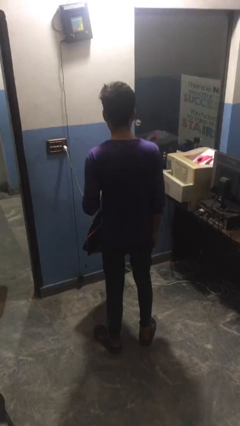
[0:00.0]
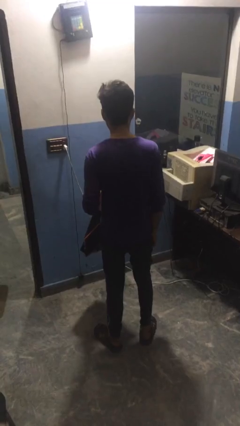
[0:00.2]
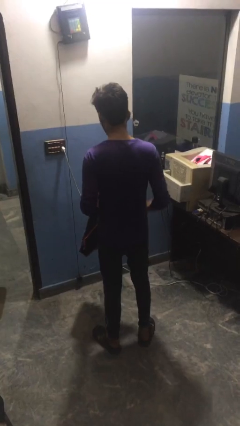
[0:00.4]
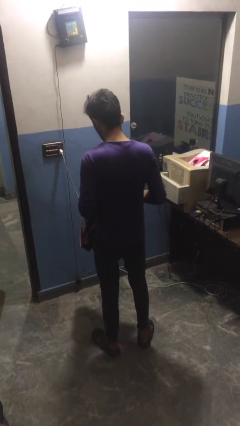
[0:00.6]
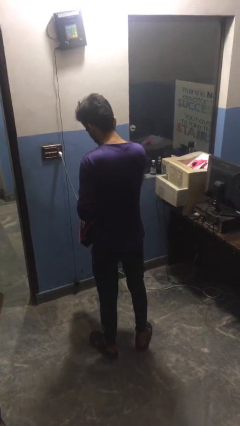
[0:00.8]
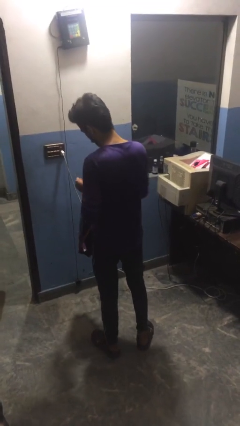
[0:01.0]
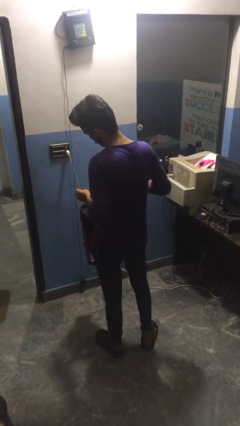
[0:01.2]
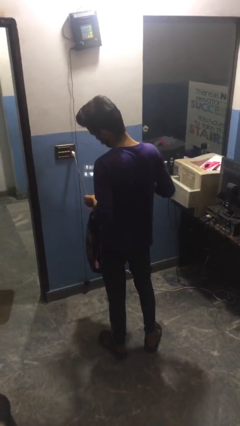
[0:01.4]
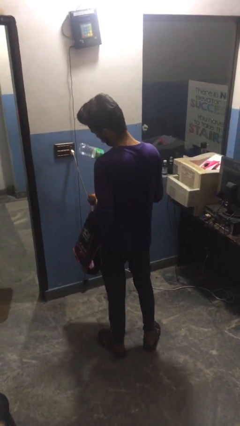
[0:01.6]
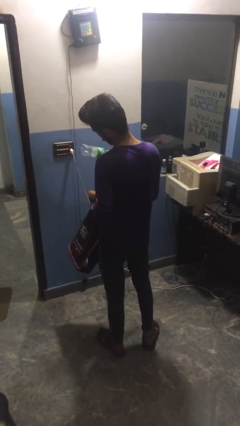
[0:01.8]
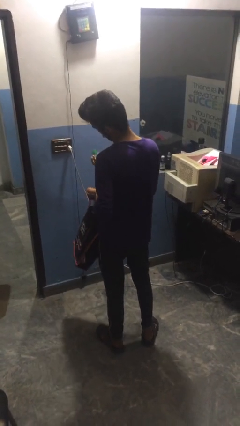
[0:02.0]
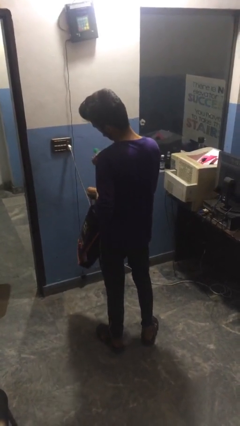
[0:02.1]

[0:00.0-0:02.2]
person takes object from bag

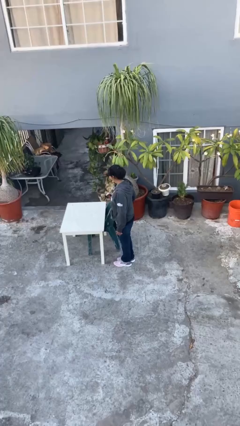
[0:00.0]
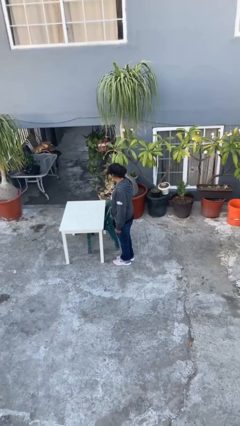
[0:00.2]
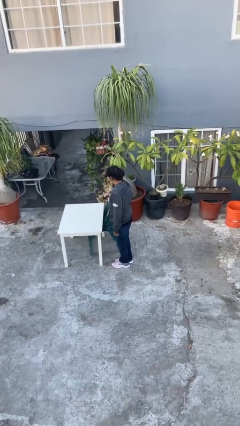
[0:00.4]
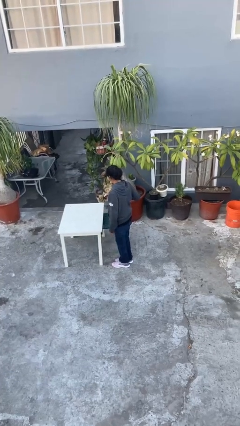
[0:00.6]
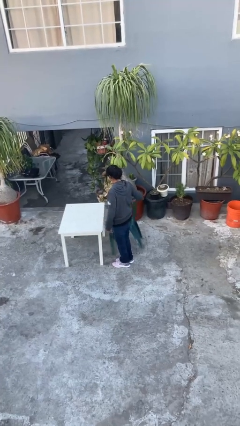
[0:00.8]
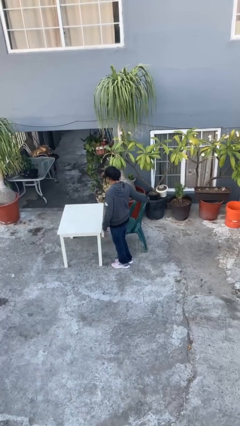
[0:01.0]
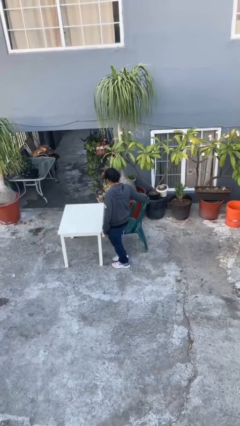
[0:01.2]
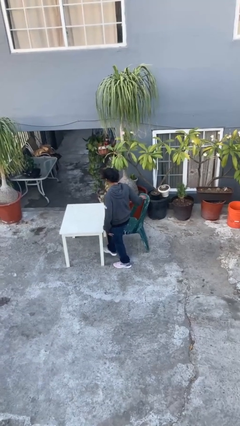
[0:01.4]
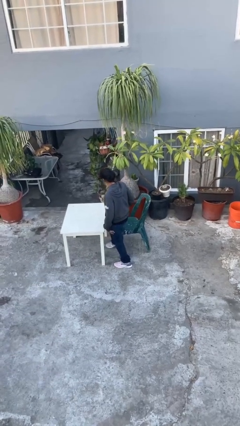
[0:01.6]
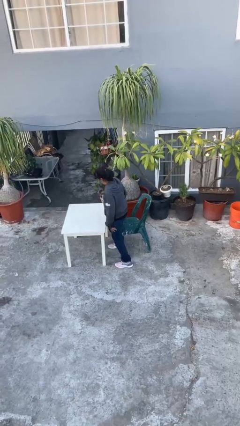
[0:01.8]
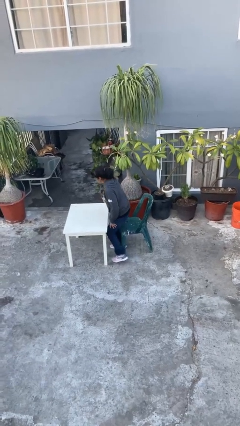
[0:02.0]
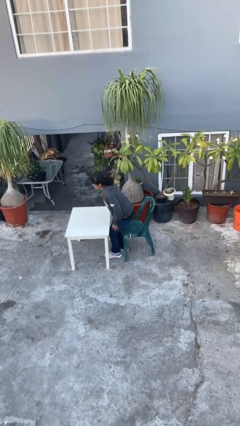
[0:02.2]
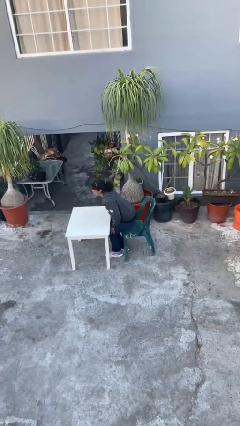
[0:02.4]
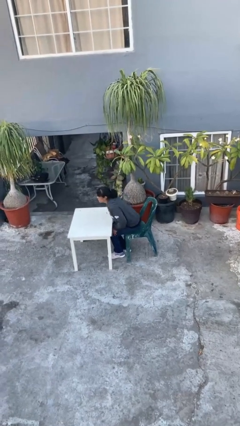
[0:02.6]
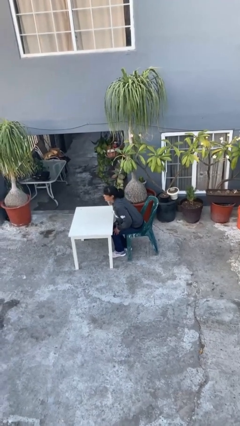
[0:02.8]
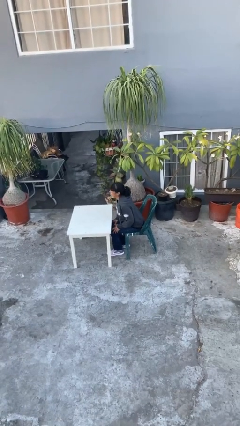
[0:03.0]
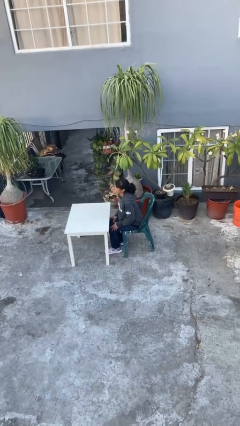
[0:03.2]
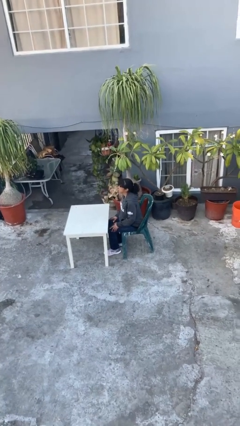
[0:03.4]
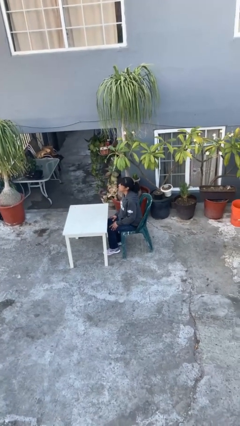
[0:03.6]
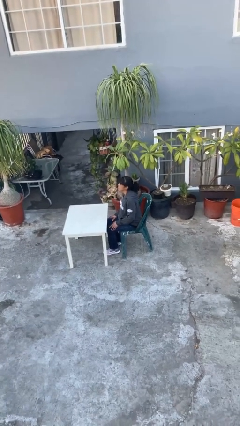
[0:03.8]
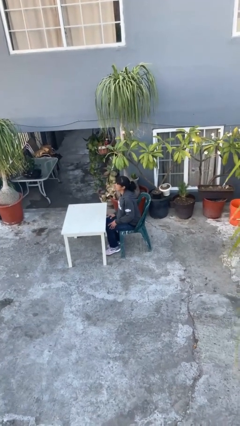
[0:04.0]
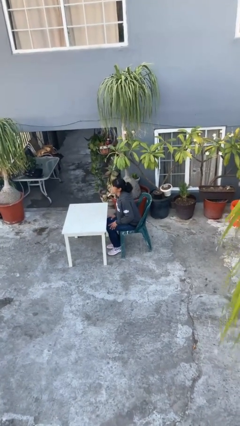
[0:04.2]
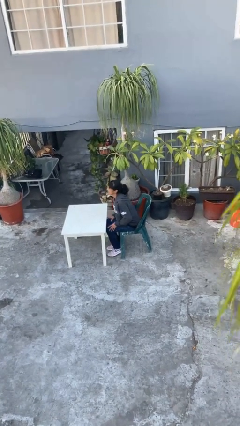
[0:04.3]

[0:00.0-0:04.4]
person sits down

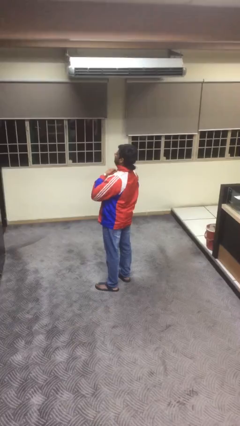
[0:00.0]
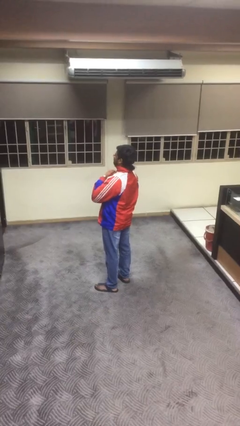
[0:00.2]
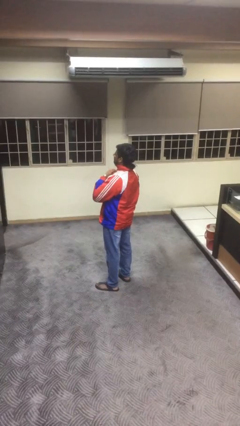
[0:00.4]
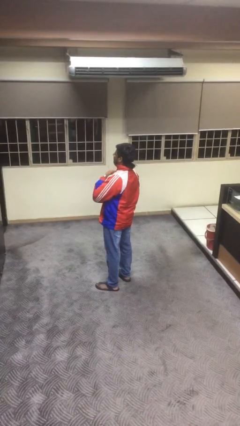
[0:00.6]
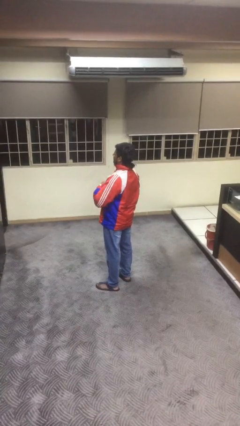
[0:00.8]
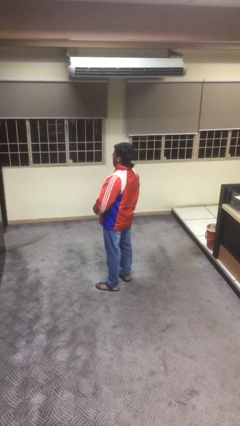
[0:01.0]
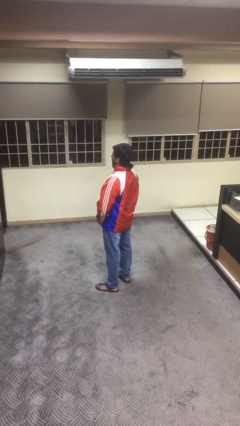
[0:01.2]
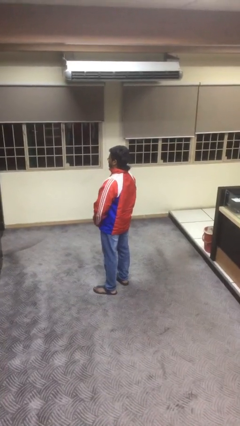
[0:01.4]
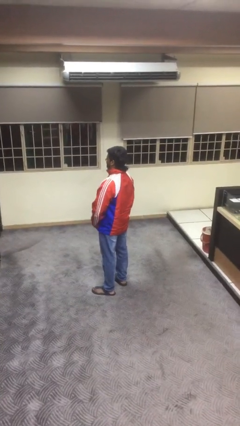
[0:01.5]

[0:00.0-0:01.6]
person unzips jacket

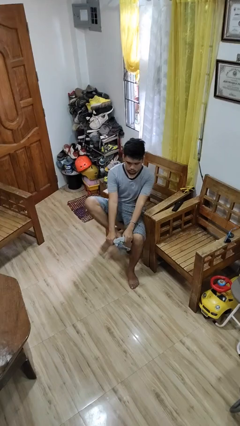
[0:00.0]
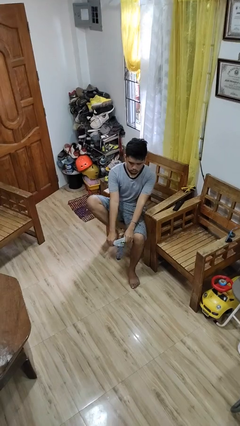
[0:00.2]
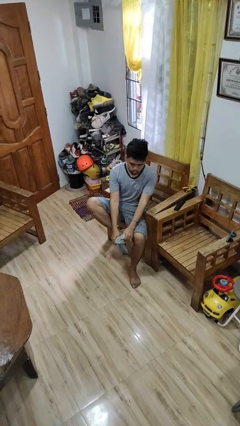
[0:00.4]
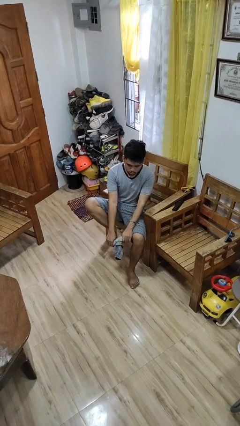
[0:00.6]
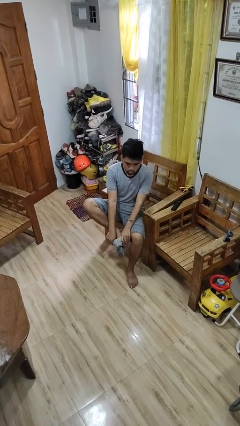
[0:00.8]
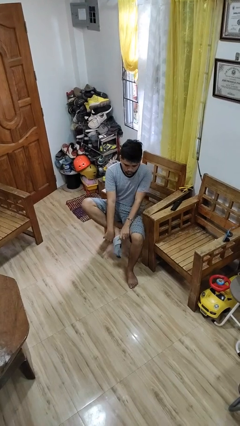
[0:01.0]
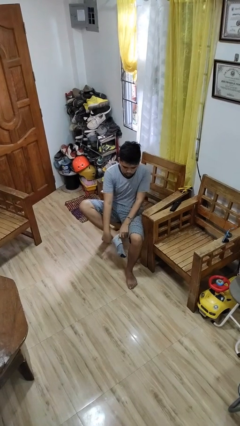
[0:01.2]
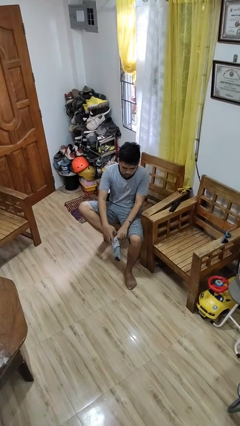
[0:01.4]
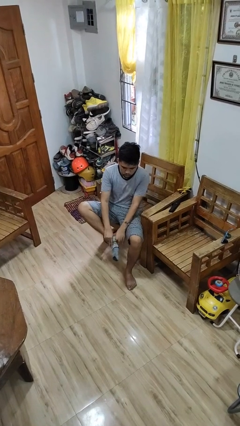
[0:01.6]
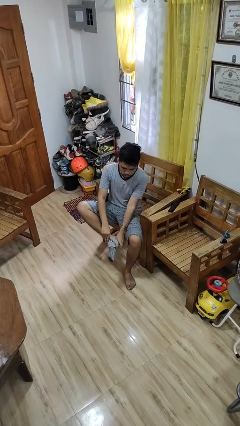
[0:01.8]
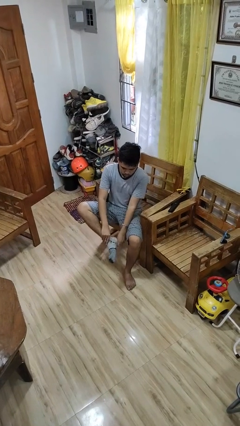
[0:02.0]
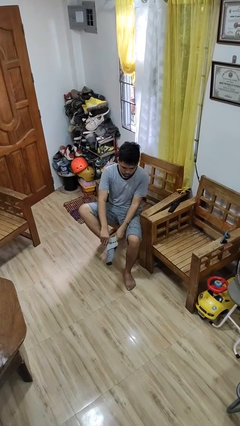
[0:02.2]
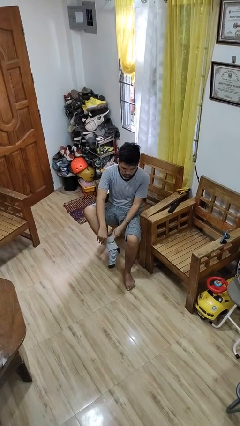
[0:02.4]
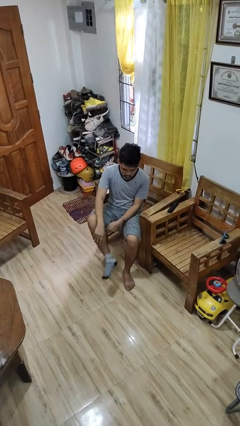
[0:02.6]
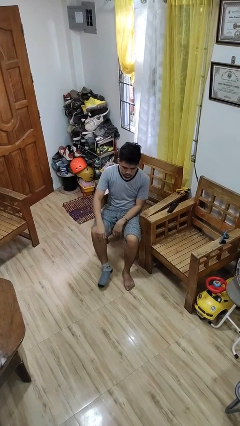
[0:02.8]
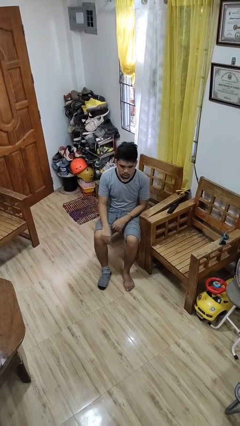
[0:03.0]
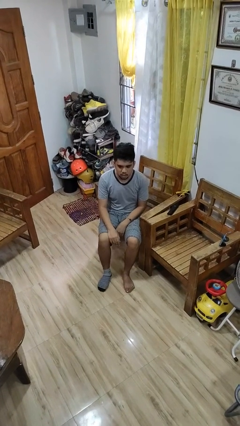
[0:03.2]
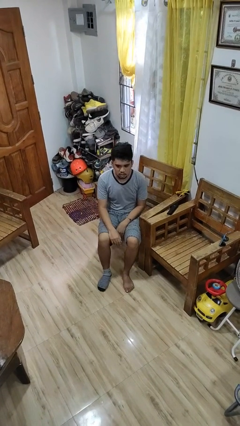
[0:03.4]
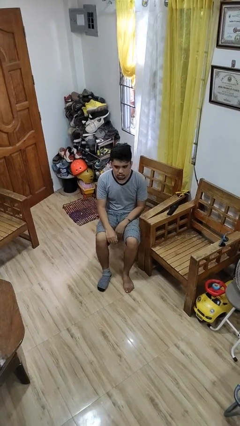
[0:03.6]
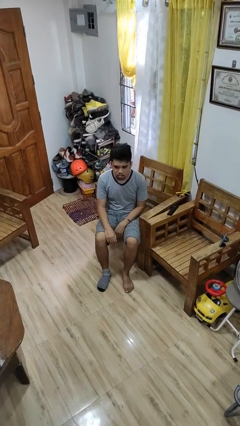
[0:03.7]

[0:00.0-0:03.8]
person puts on socks

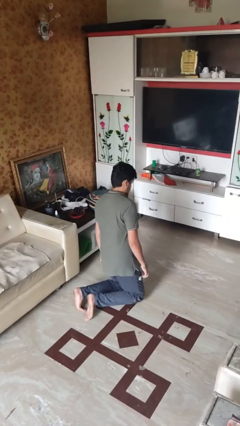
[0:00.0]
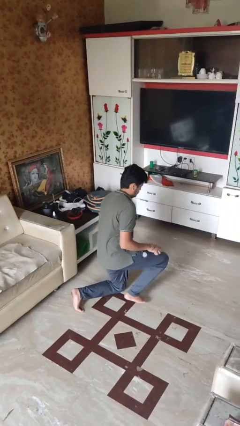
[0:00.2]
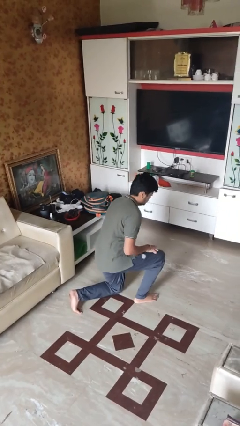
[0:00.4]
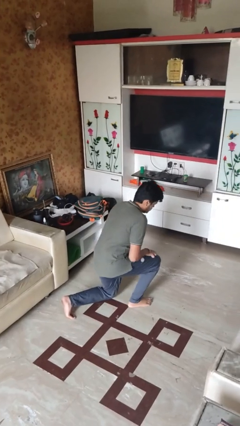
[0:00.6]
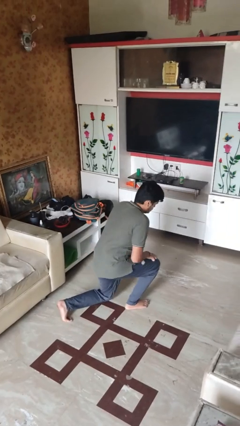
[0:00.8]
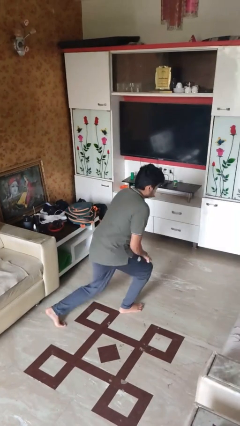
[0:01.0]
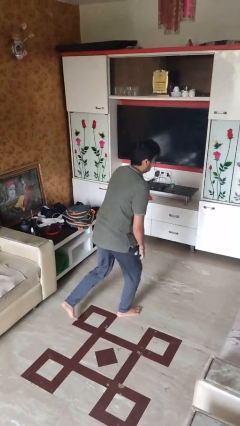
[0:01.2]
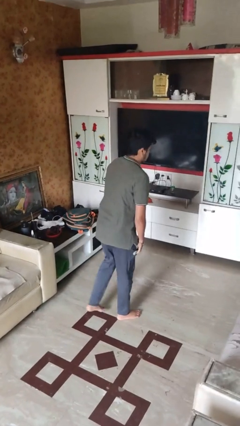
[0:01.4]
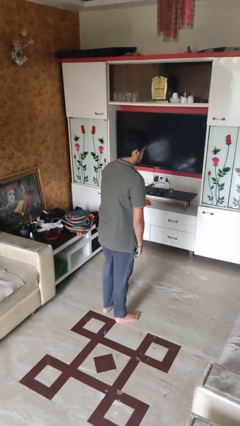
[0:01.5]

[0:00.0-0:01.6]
person stands up from floor

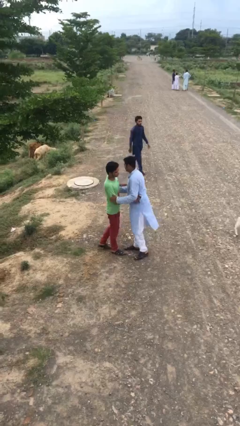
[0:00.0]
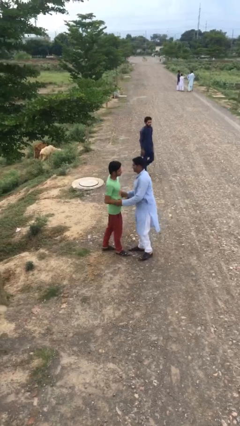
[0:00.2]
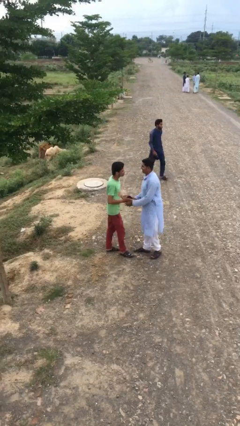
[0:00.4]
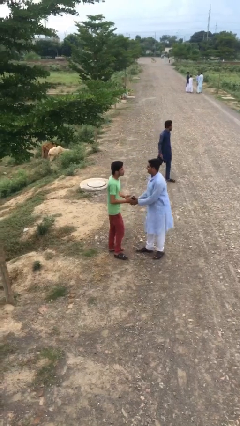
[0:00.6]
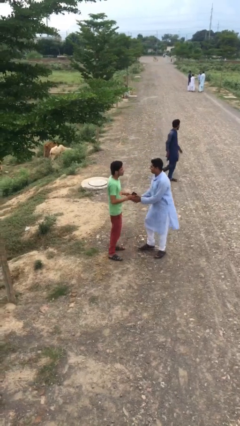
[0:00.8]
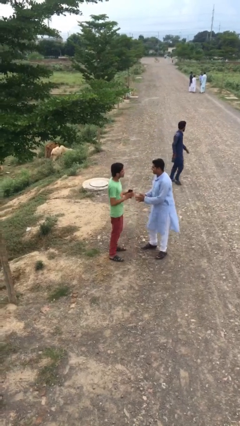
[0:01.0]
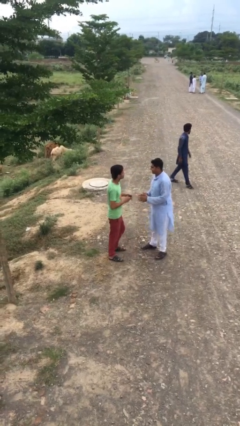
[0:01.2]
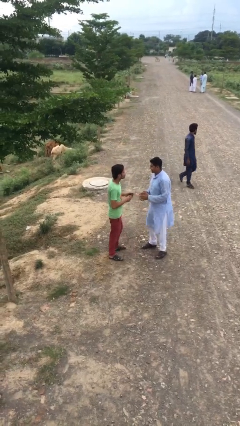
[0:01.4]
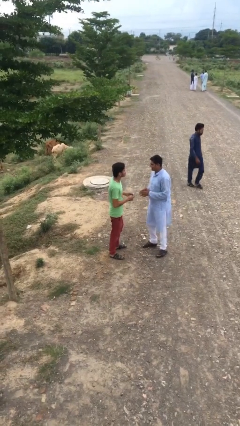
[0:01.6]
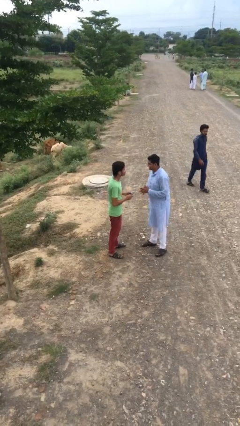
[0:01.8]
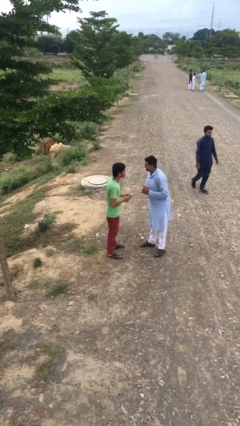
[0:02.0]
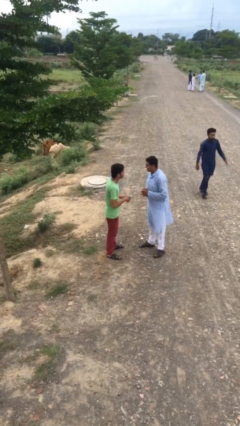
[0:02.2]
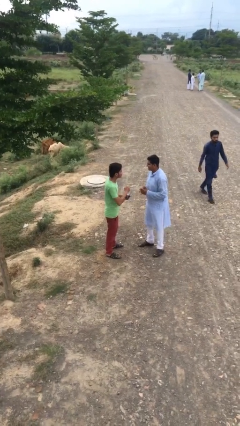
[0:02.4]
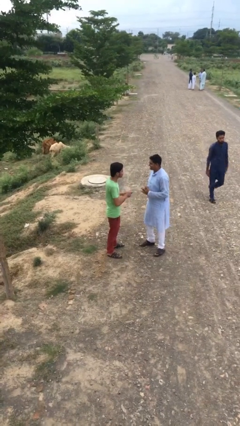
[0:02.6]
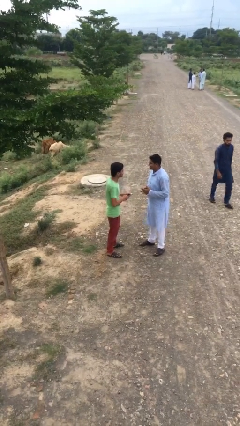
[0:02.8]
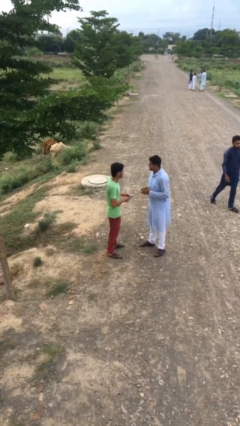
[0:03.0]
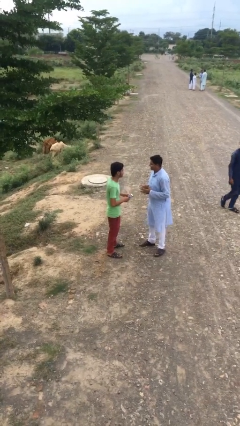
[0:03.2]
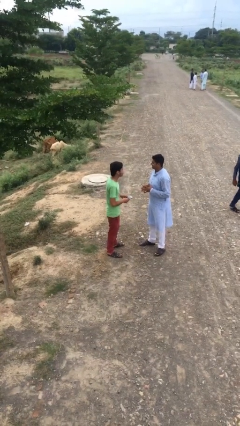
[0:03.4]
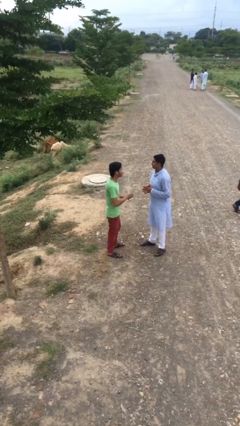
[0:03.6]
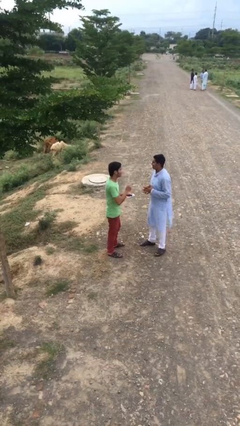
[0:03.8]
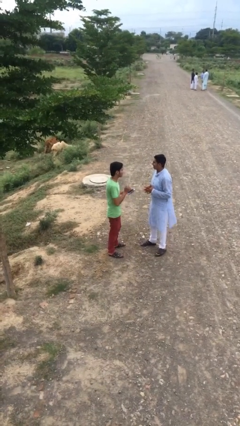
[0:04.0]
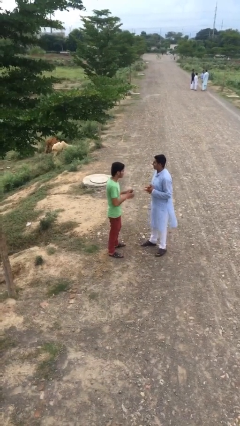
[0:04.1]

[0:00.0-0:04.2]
person talks to person
